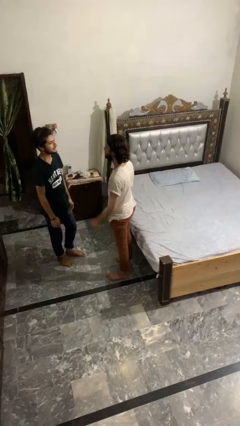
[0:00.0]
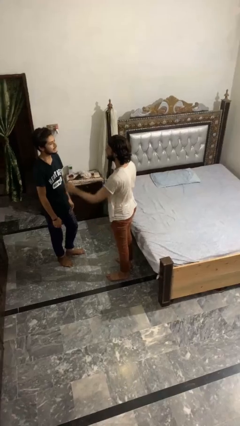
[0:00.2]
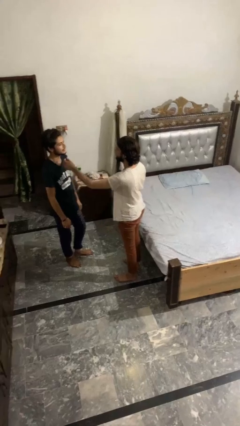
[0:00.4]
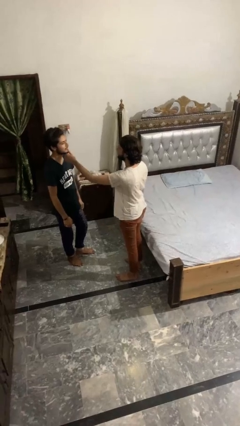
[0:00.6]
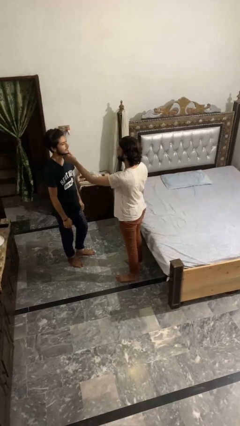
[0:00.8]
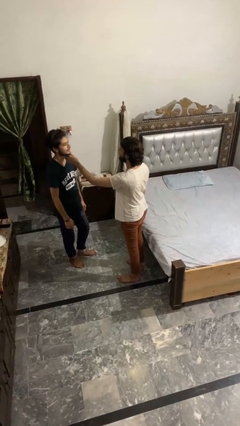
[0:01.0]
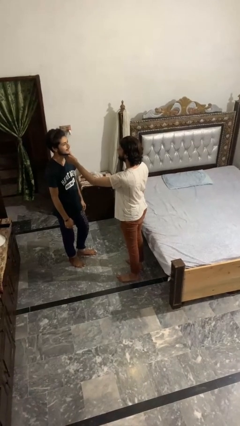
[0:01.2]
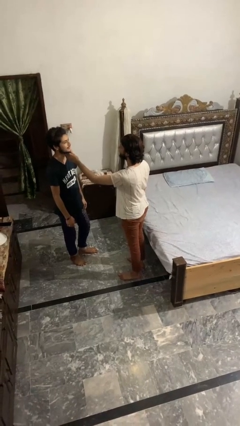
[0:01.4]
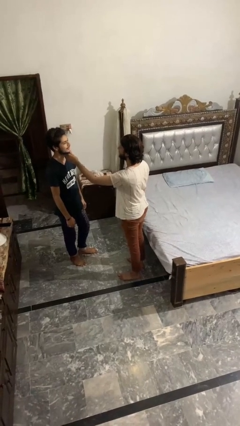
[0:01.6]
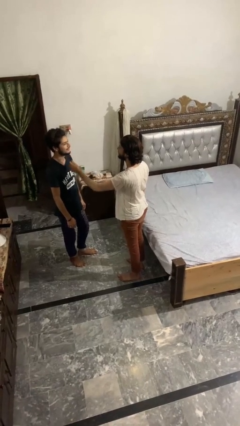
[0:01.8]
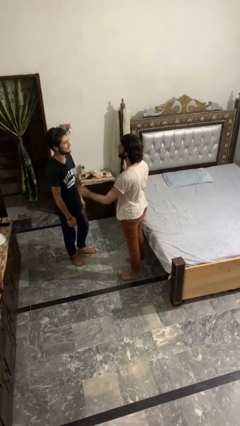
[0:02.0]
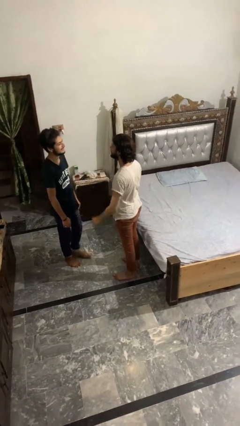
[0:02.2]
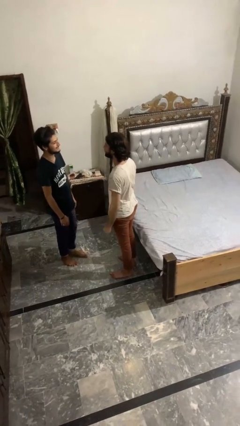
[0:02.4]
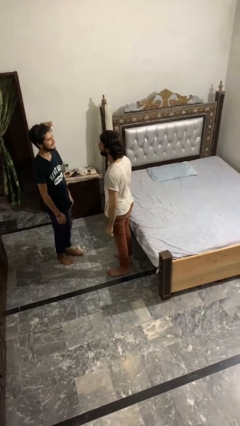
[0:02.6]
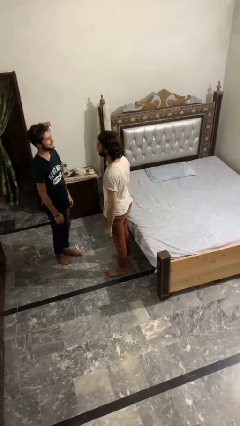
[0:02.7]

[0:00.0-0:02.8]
person touches face of person

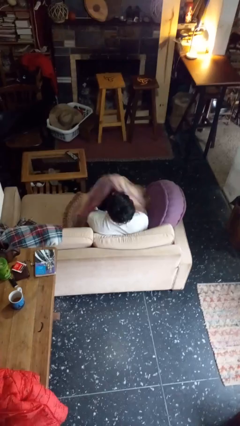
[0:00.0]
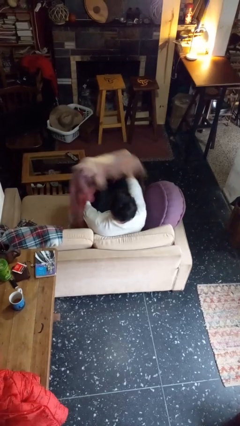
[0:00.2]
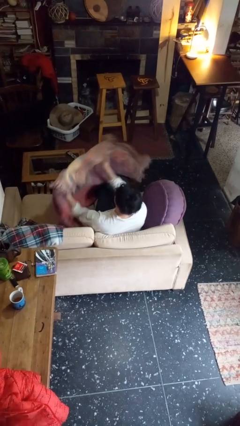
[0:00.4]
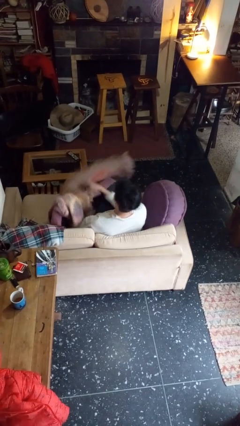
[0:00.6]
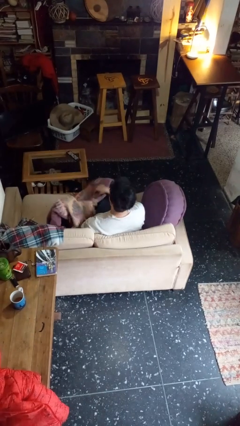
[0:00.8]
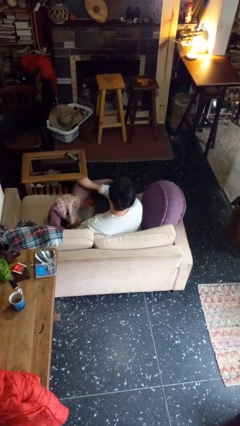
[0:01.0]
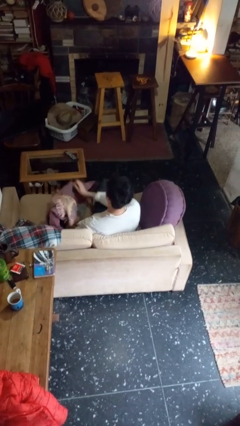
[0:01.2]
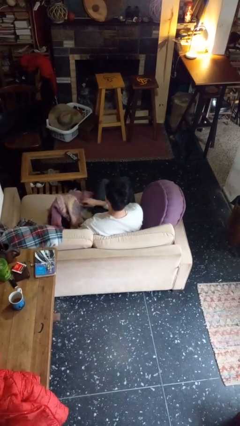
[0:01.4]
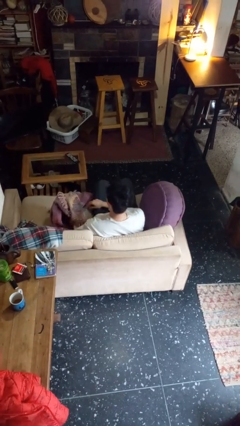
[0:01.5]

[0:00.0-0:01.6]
person uncovers with blanket

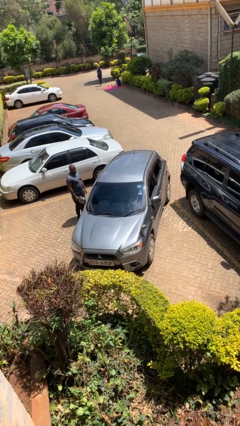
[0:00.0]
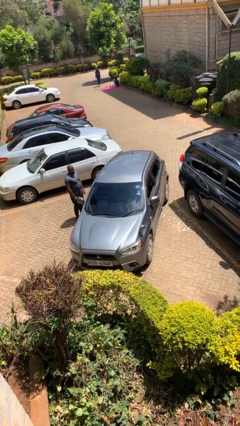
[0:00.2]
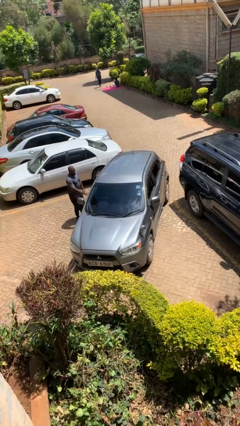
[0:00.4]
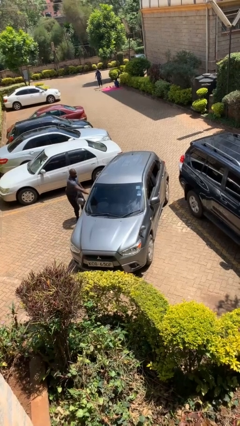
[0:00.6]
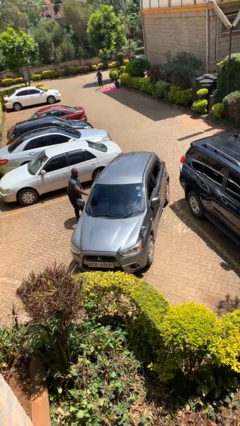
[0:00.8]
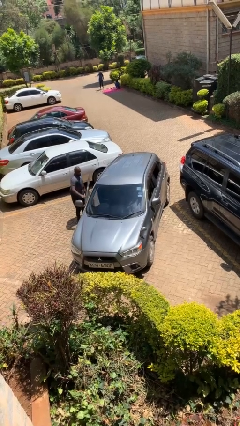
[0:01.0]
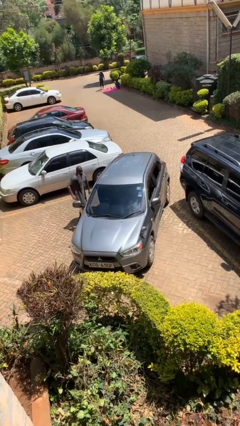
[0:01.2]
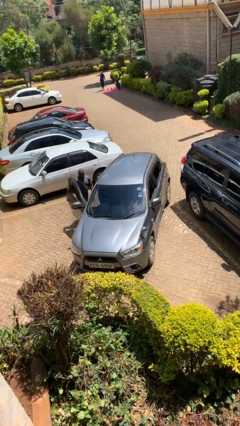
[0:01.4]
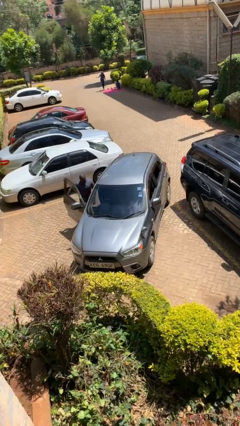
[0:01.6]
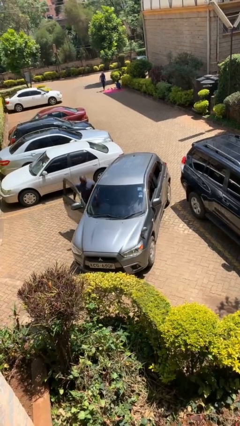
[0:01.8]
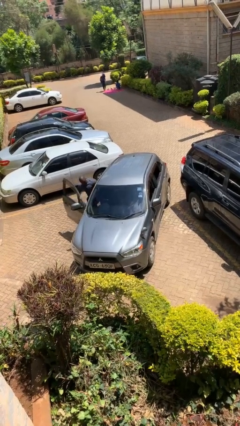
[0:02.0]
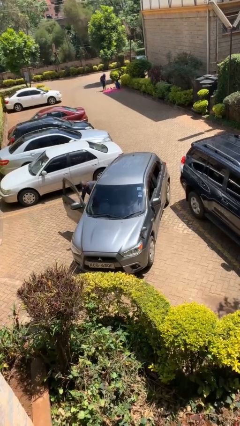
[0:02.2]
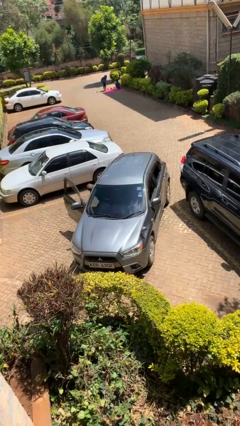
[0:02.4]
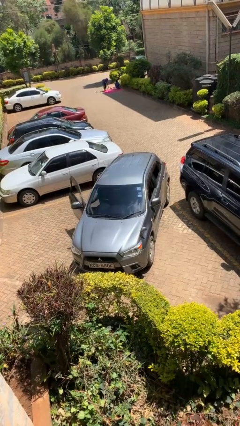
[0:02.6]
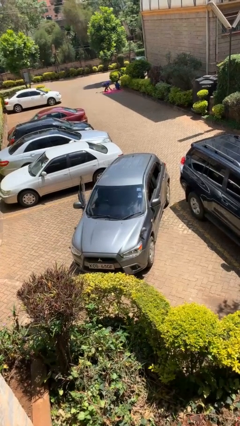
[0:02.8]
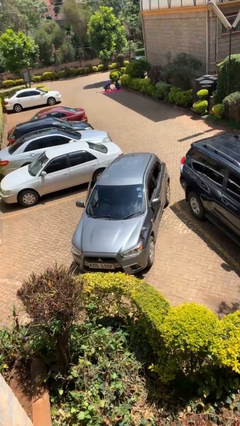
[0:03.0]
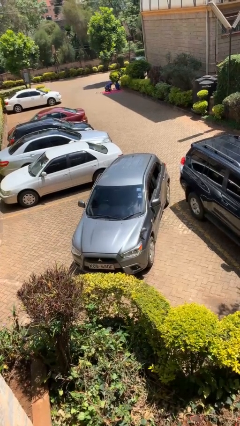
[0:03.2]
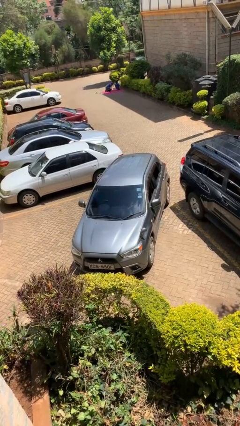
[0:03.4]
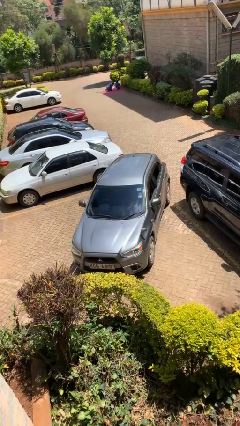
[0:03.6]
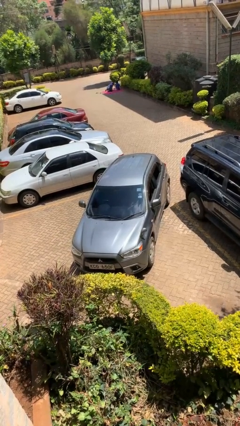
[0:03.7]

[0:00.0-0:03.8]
car picks up person

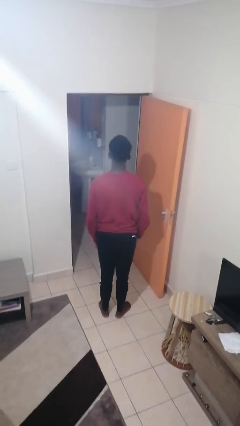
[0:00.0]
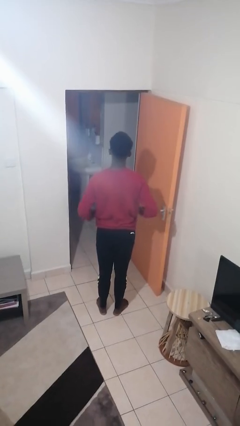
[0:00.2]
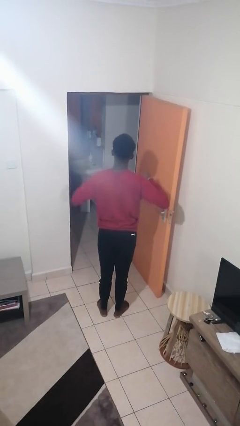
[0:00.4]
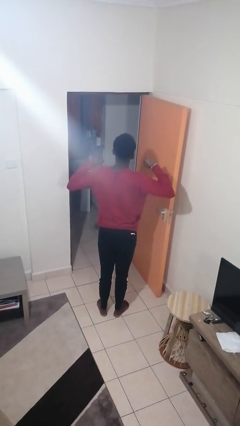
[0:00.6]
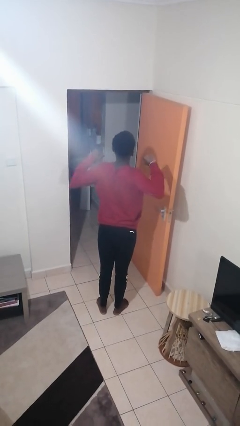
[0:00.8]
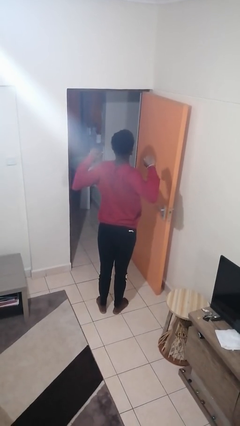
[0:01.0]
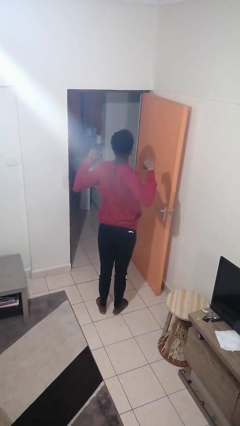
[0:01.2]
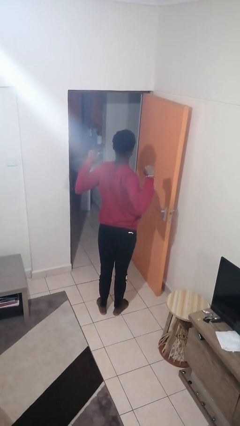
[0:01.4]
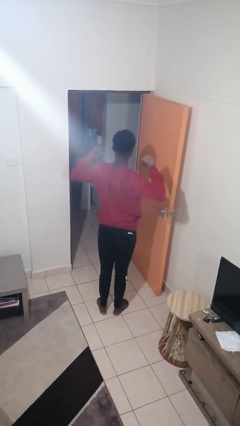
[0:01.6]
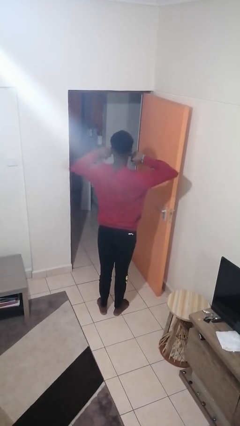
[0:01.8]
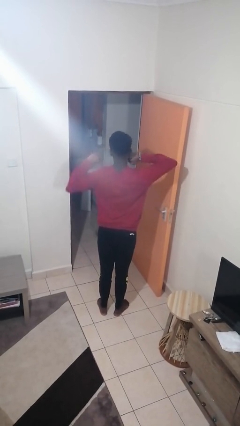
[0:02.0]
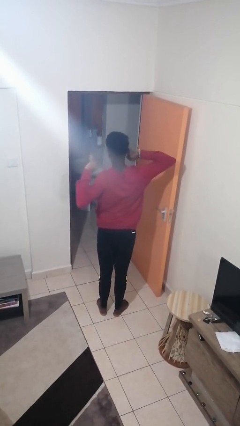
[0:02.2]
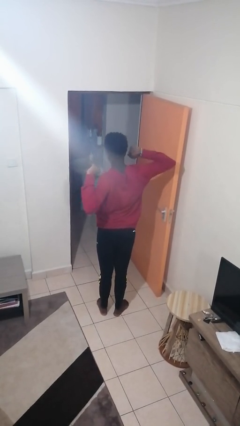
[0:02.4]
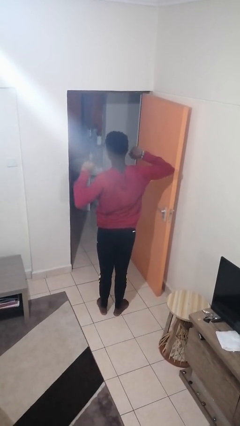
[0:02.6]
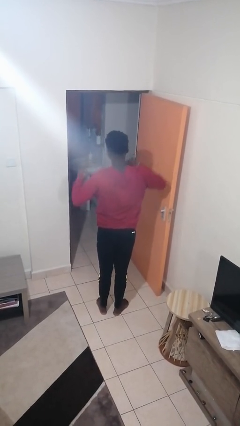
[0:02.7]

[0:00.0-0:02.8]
person stretches arms to side

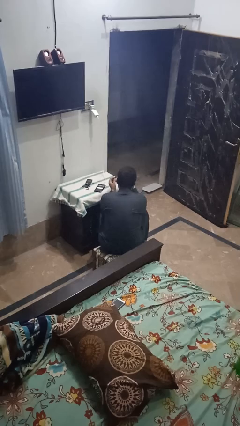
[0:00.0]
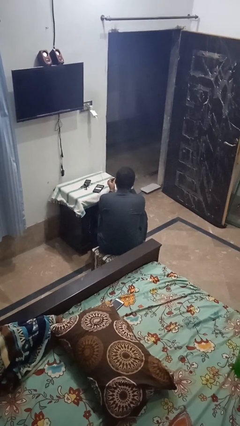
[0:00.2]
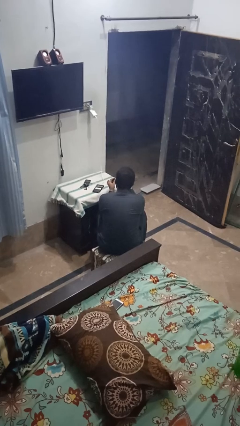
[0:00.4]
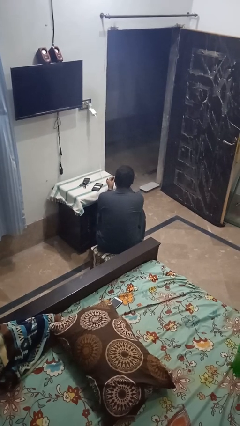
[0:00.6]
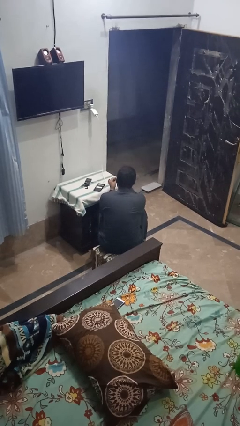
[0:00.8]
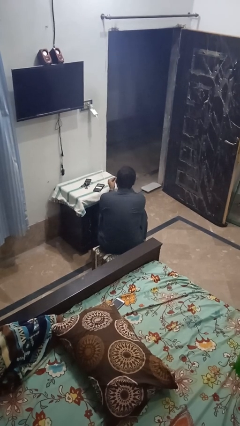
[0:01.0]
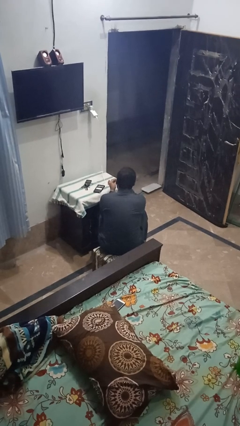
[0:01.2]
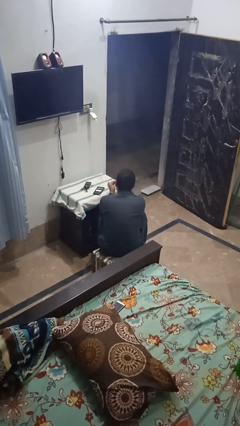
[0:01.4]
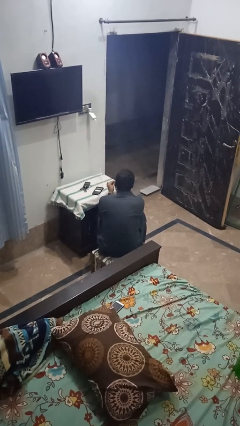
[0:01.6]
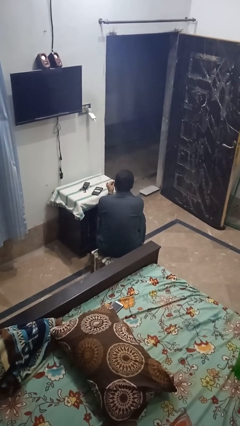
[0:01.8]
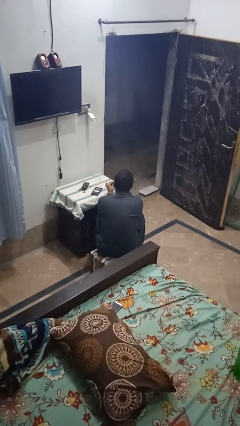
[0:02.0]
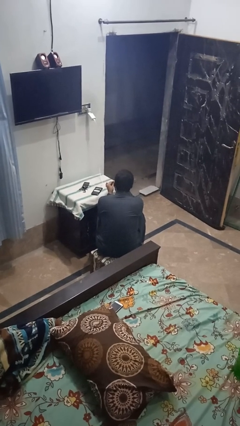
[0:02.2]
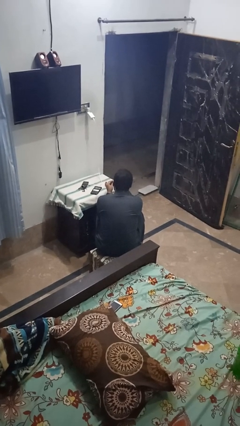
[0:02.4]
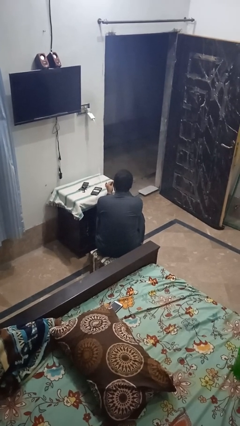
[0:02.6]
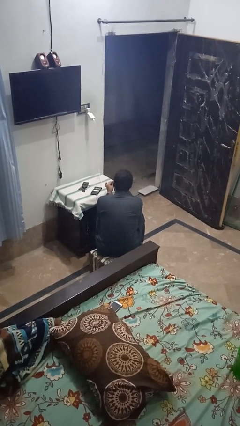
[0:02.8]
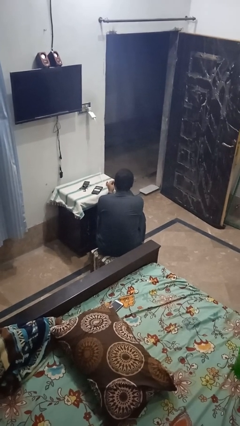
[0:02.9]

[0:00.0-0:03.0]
person paints fingernails

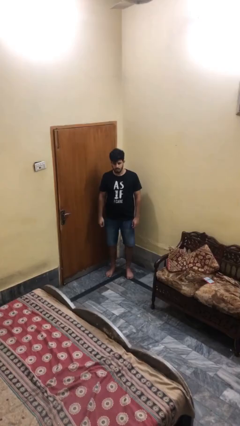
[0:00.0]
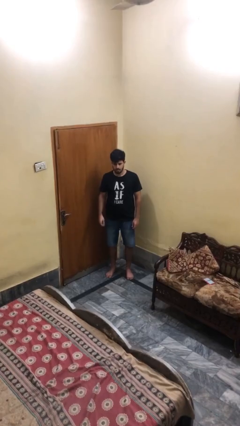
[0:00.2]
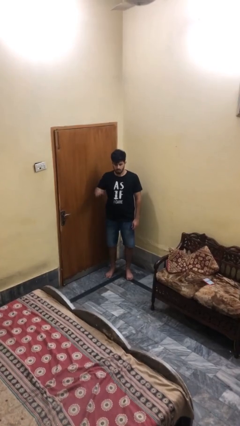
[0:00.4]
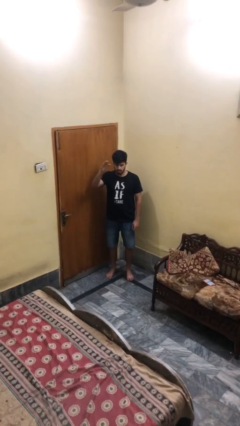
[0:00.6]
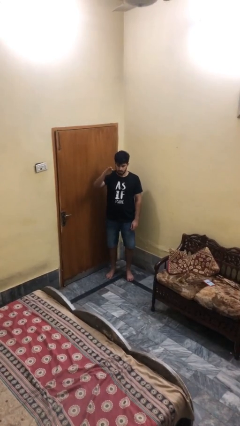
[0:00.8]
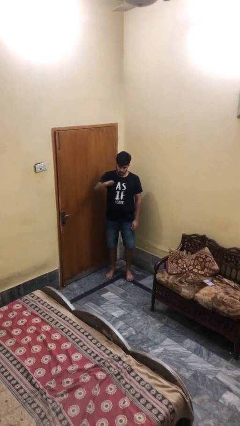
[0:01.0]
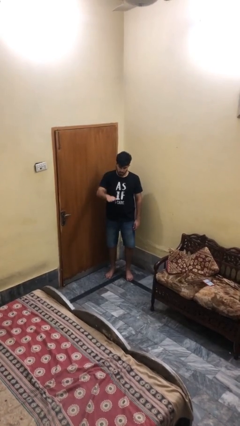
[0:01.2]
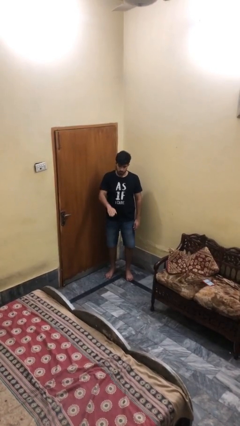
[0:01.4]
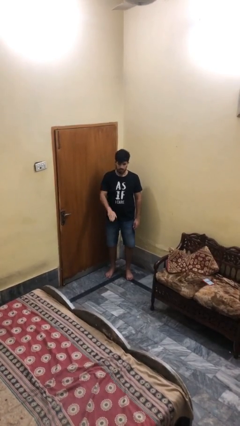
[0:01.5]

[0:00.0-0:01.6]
person gestures swipe down

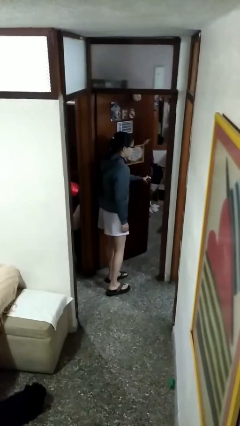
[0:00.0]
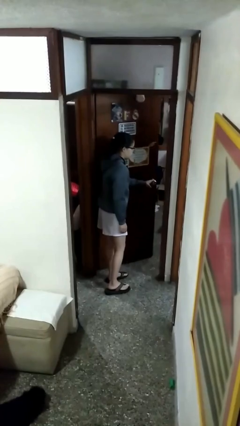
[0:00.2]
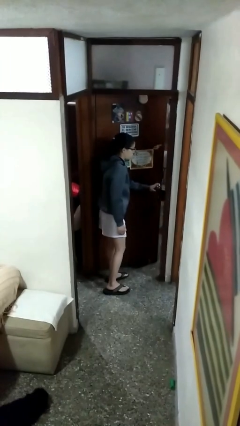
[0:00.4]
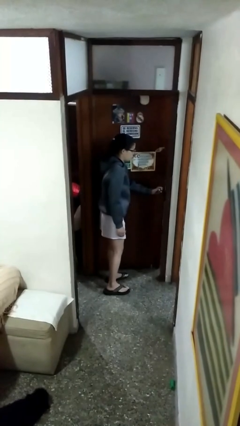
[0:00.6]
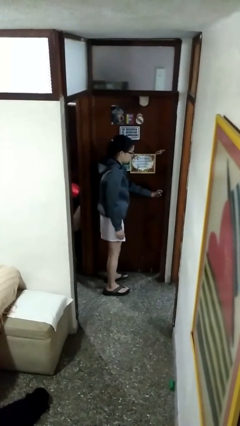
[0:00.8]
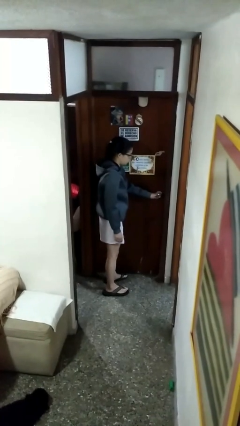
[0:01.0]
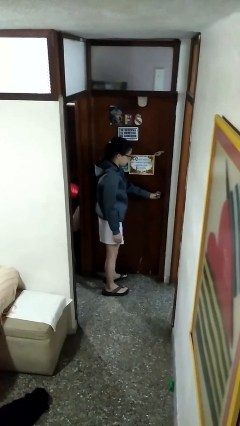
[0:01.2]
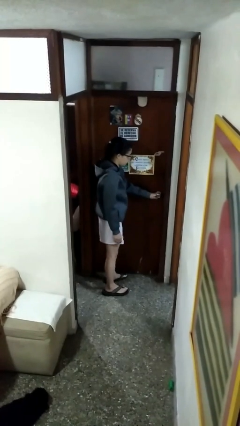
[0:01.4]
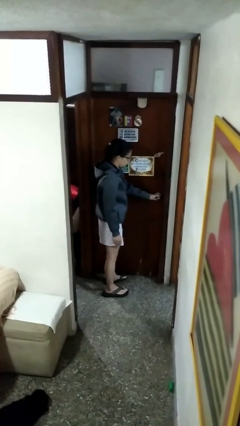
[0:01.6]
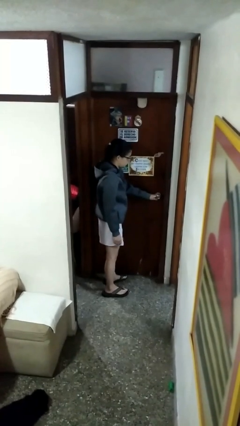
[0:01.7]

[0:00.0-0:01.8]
person closes facility door
